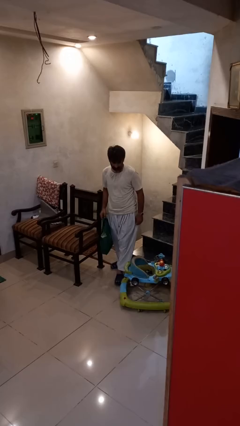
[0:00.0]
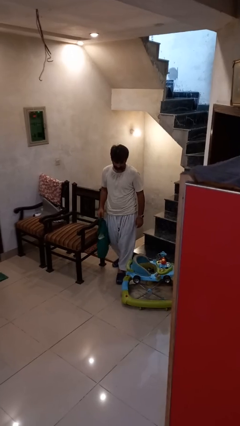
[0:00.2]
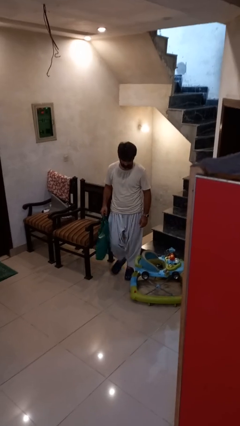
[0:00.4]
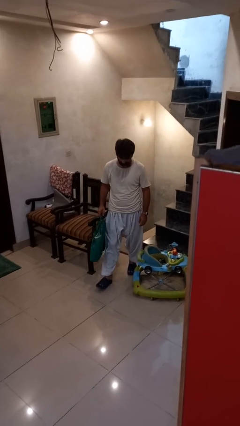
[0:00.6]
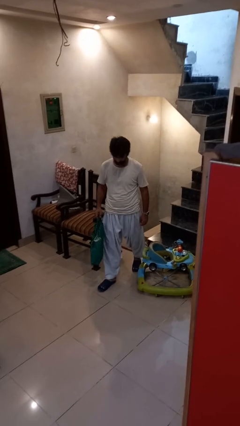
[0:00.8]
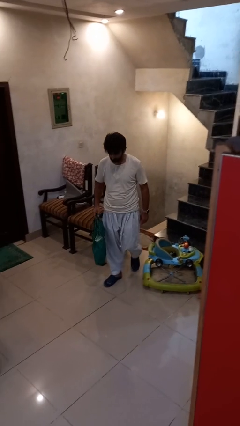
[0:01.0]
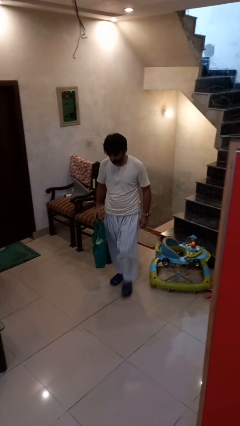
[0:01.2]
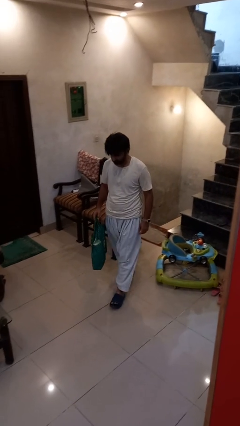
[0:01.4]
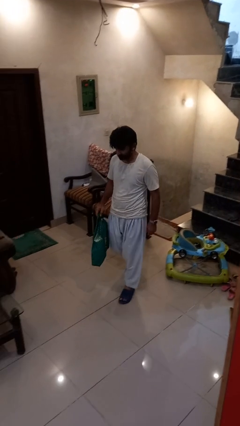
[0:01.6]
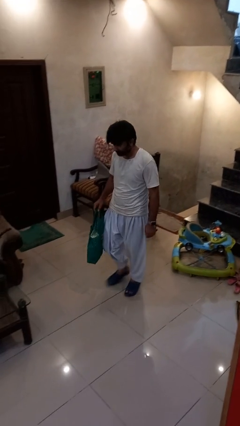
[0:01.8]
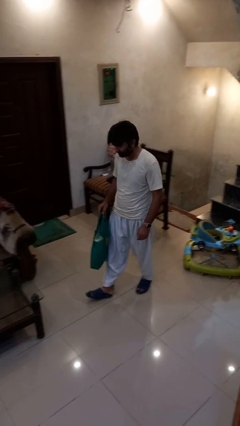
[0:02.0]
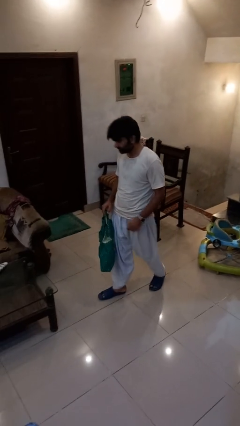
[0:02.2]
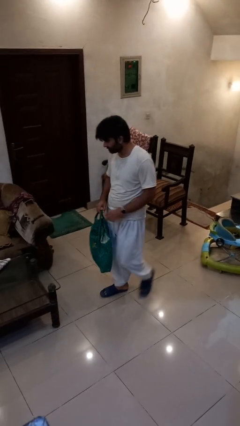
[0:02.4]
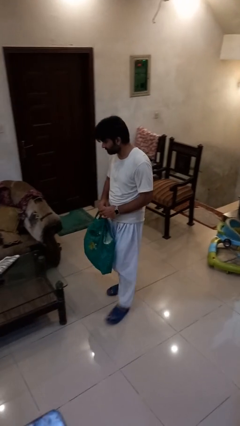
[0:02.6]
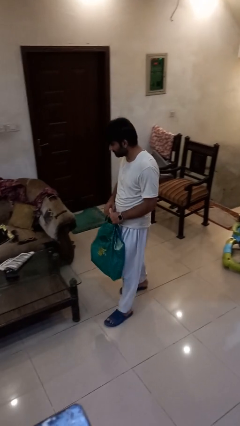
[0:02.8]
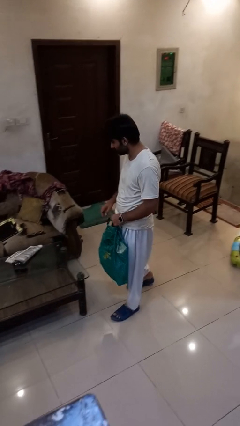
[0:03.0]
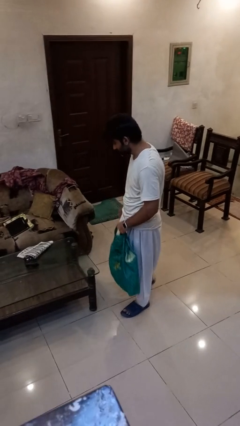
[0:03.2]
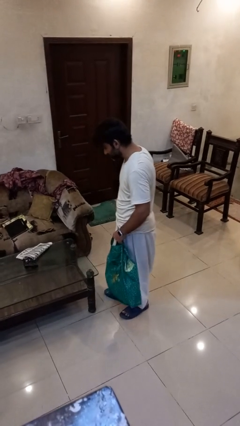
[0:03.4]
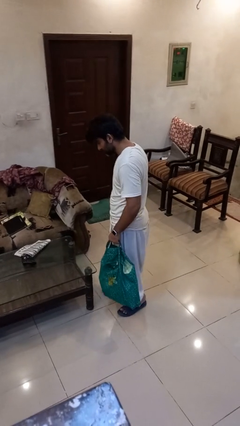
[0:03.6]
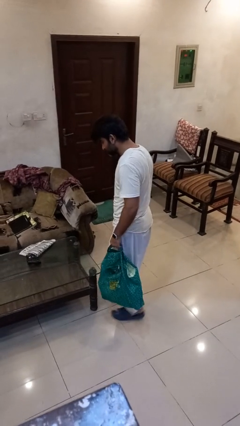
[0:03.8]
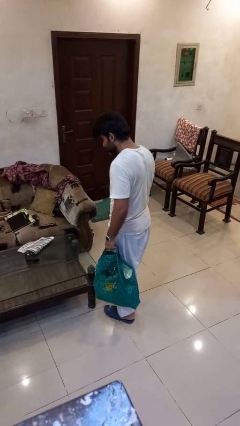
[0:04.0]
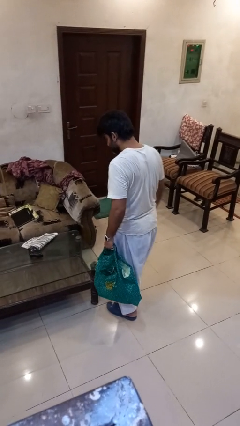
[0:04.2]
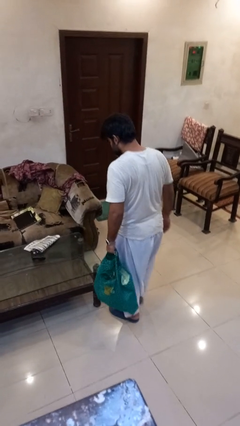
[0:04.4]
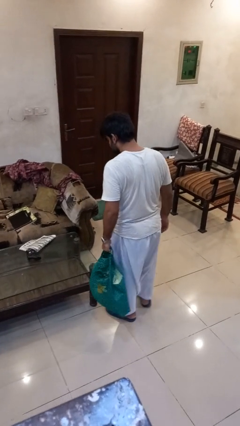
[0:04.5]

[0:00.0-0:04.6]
person carries groceries

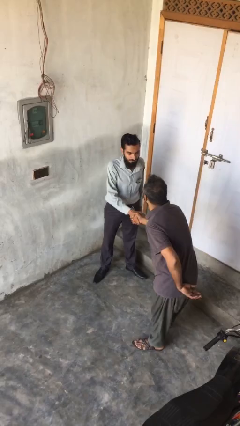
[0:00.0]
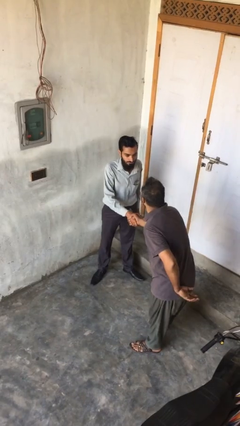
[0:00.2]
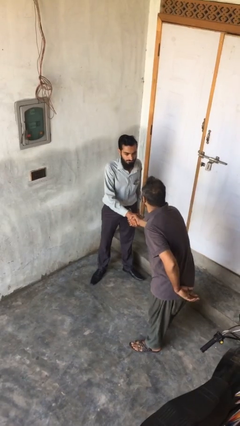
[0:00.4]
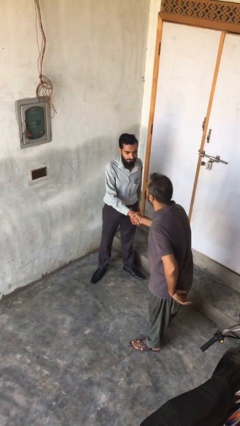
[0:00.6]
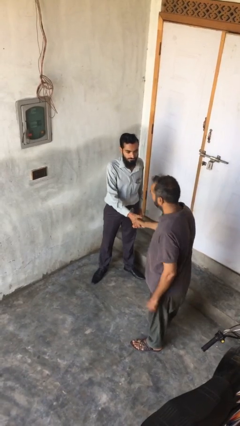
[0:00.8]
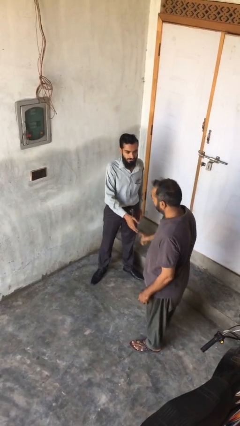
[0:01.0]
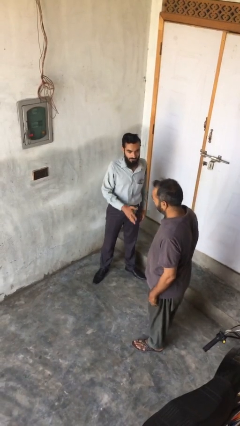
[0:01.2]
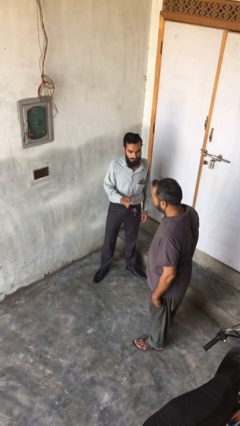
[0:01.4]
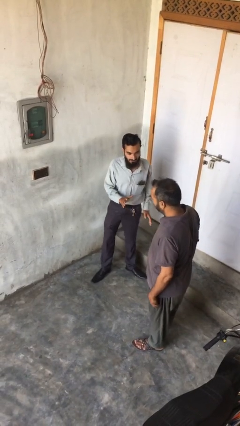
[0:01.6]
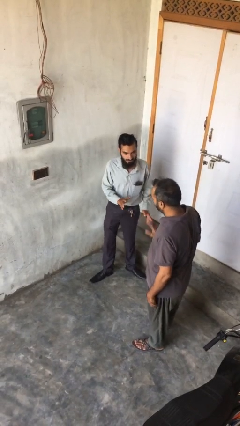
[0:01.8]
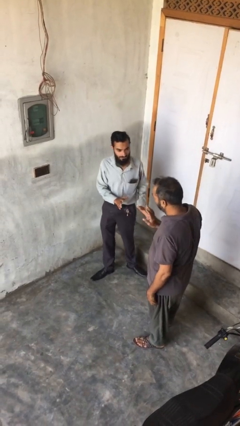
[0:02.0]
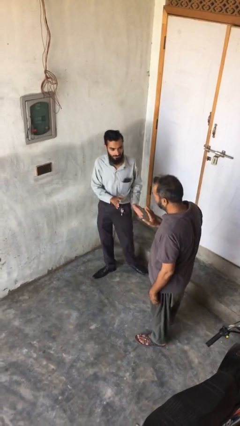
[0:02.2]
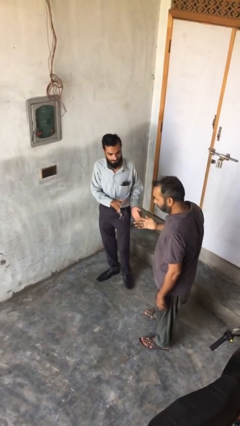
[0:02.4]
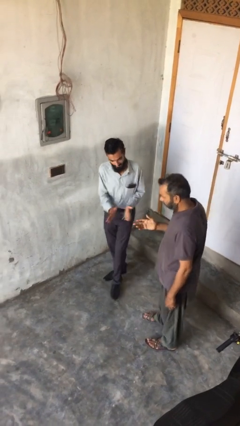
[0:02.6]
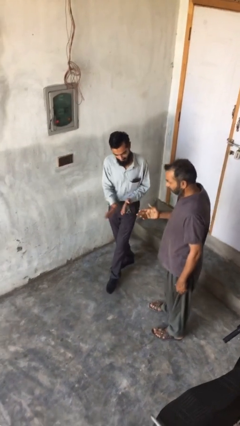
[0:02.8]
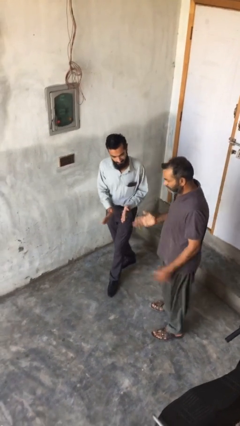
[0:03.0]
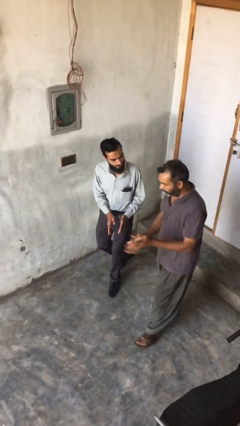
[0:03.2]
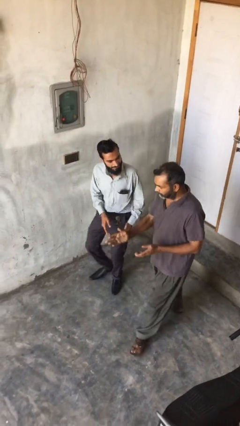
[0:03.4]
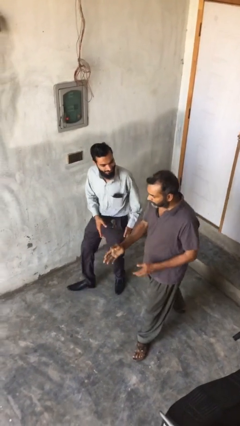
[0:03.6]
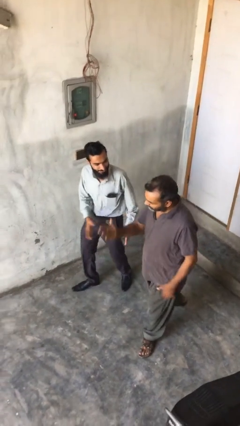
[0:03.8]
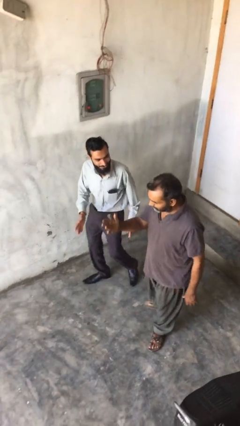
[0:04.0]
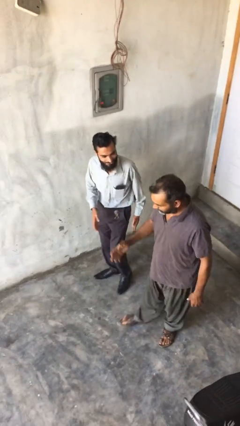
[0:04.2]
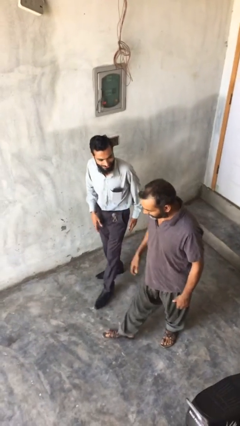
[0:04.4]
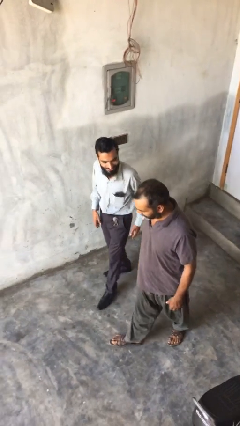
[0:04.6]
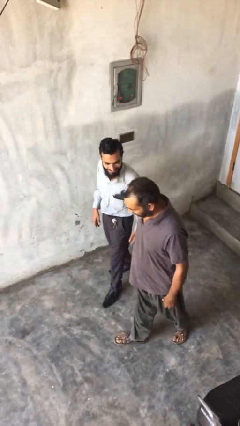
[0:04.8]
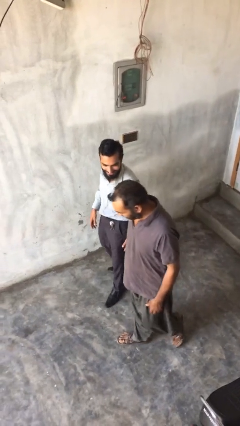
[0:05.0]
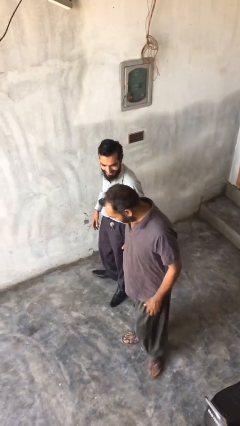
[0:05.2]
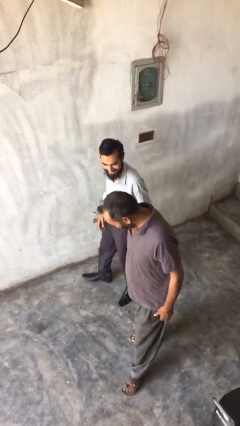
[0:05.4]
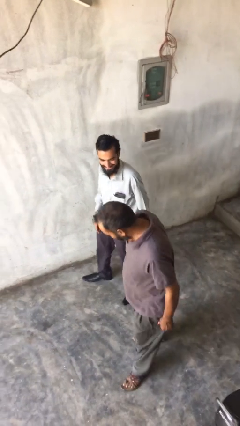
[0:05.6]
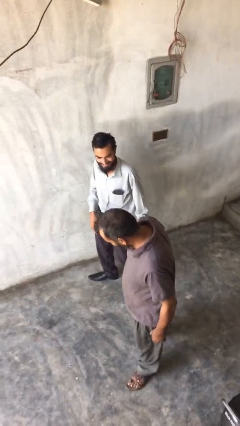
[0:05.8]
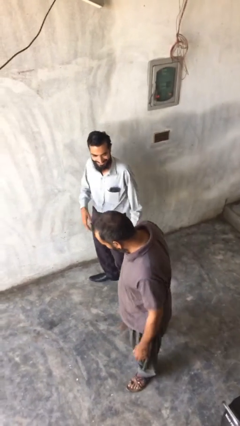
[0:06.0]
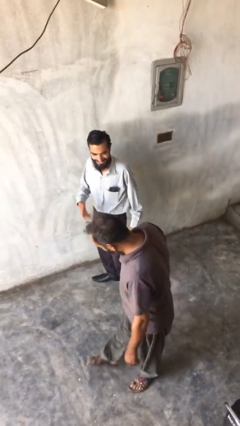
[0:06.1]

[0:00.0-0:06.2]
person talks to person

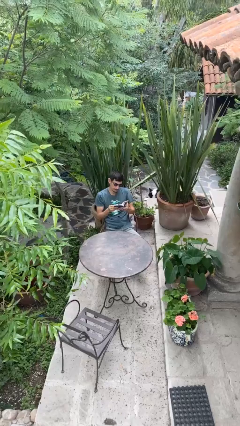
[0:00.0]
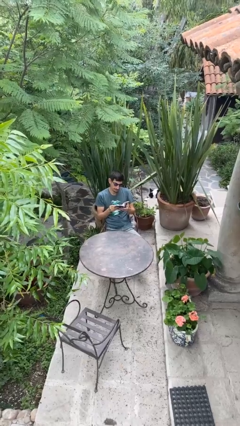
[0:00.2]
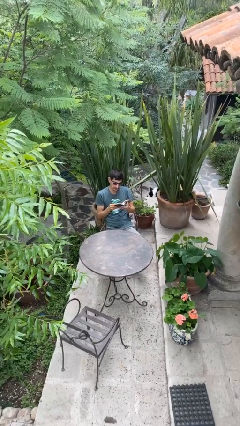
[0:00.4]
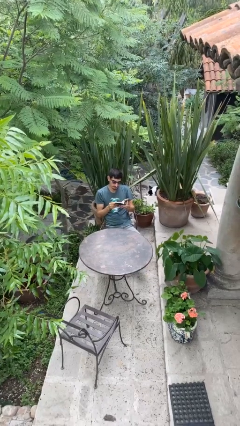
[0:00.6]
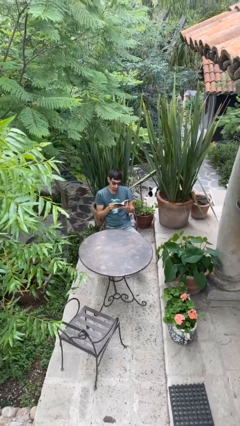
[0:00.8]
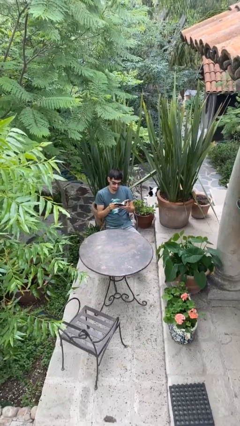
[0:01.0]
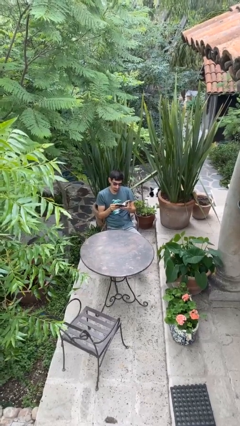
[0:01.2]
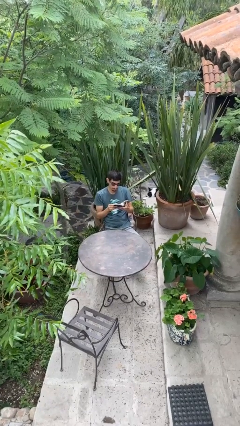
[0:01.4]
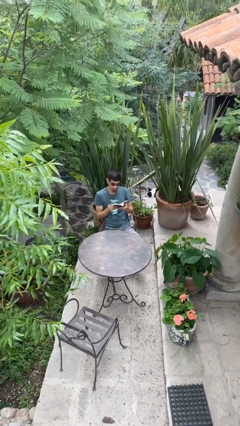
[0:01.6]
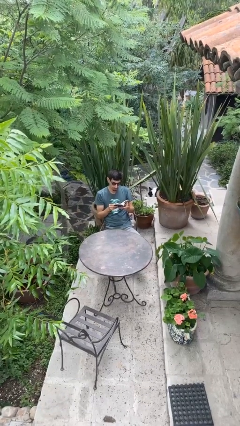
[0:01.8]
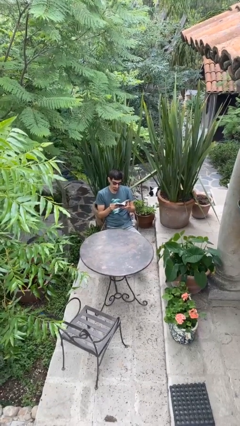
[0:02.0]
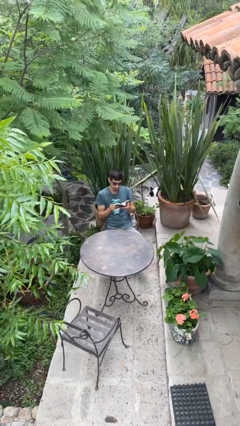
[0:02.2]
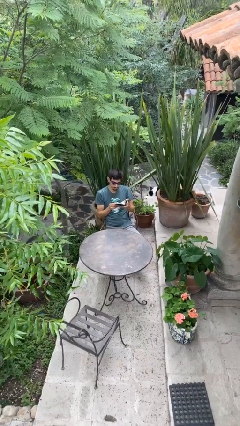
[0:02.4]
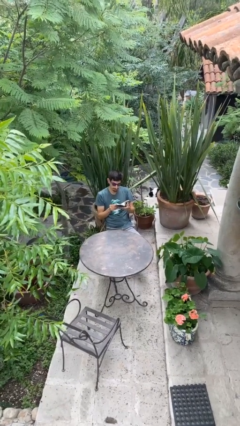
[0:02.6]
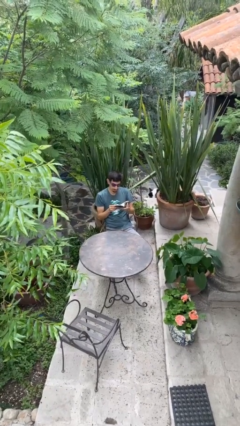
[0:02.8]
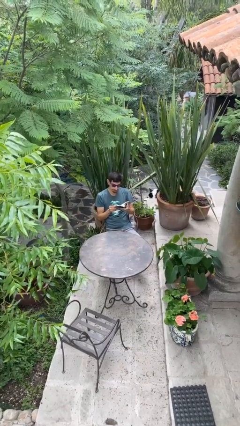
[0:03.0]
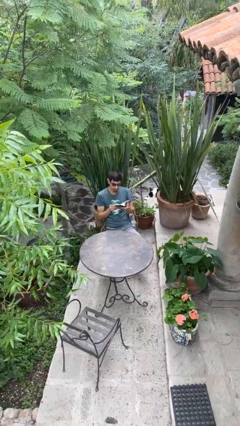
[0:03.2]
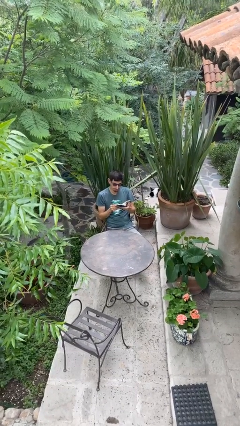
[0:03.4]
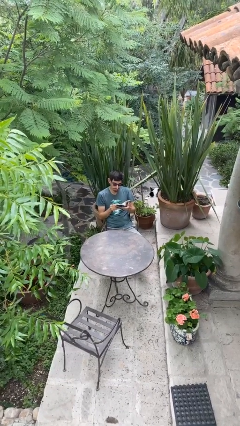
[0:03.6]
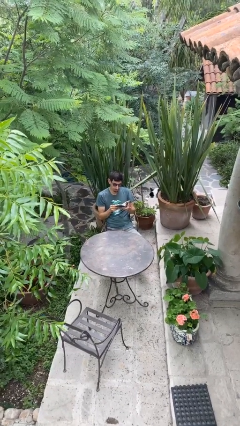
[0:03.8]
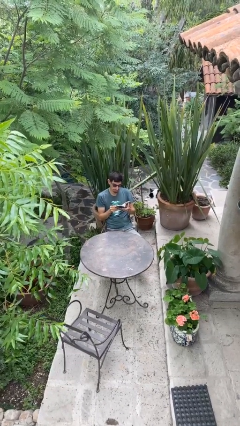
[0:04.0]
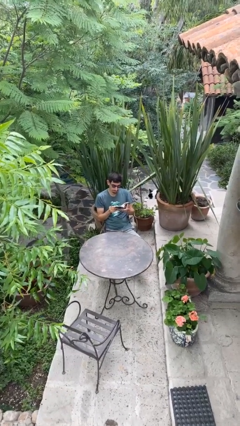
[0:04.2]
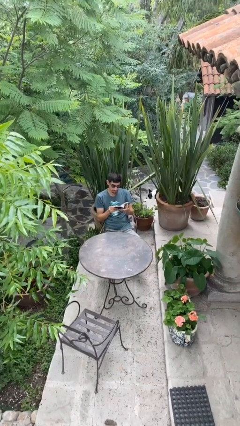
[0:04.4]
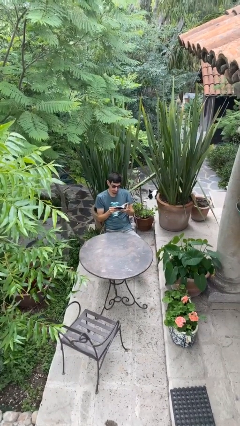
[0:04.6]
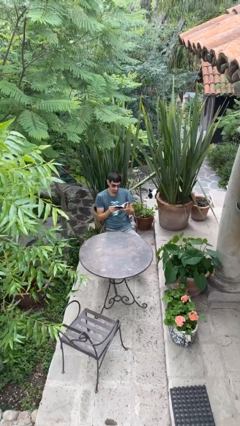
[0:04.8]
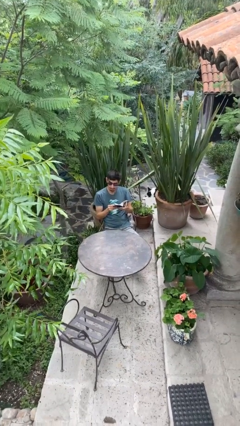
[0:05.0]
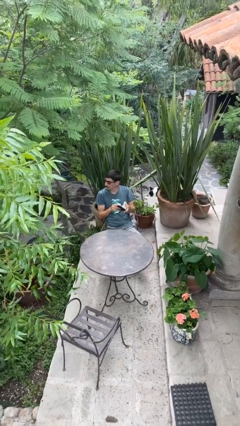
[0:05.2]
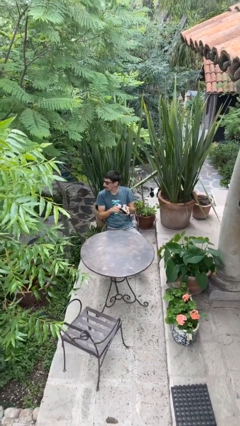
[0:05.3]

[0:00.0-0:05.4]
person reads document

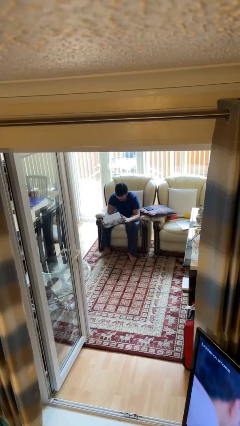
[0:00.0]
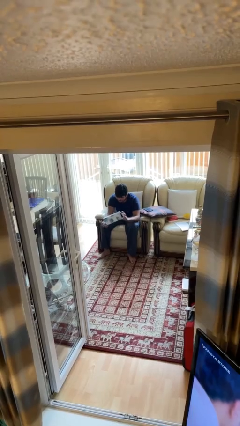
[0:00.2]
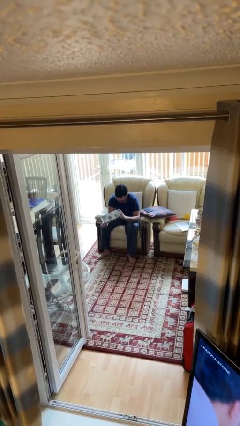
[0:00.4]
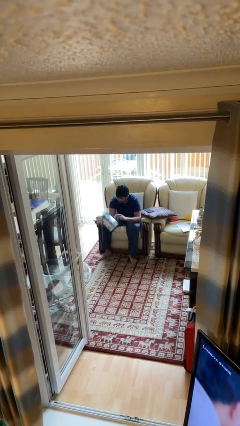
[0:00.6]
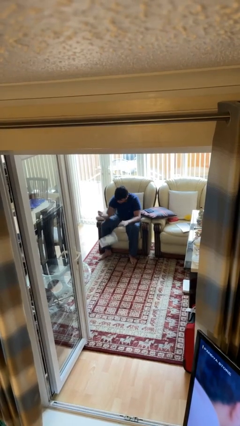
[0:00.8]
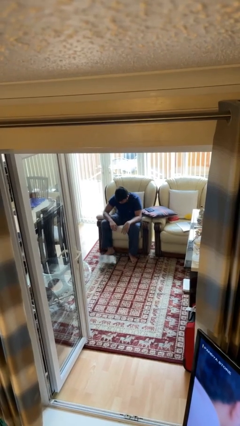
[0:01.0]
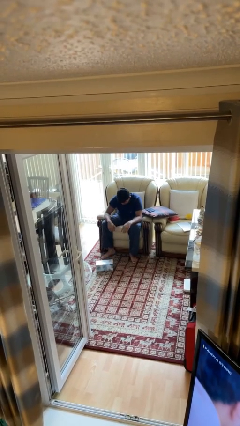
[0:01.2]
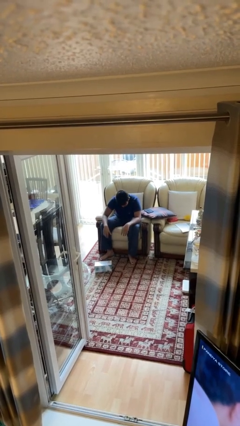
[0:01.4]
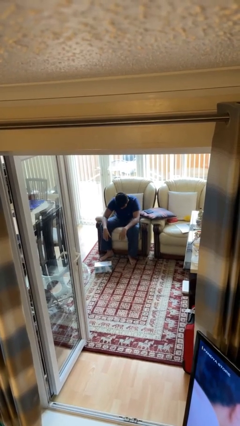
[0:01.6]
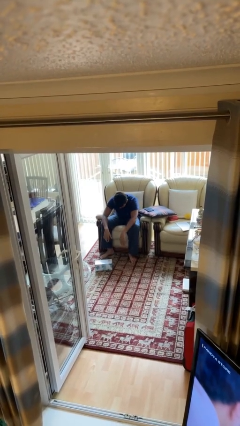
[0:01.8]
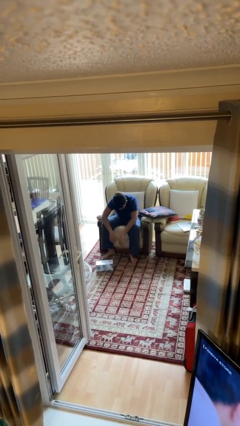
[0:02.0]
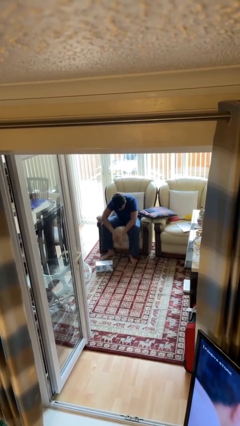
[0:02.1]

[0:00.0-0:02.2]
person drops object
